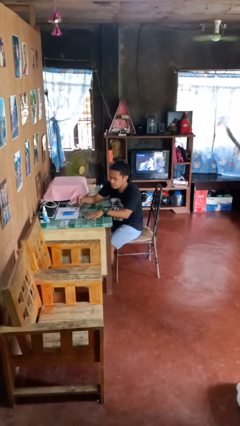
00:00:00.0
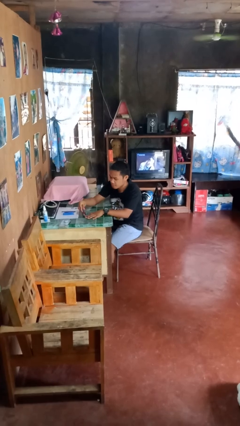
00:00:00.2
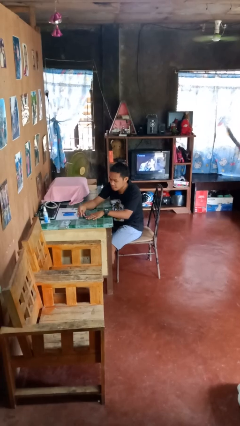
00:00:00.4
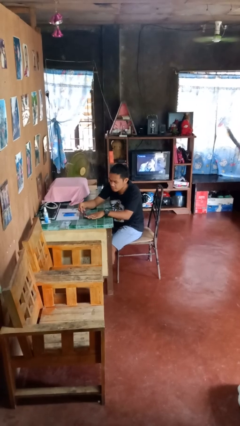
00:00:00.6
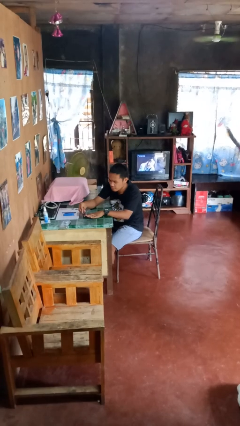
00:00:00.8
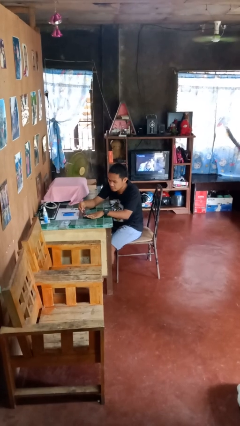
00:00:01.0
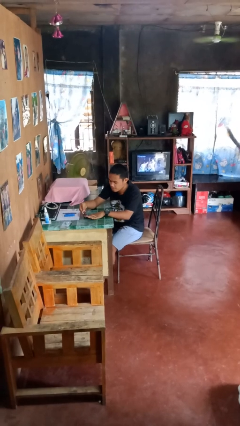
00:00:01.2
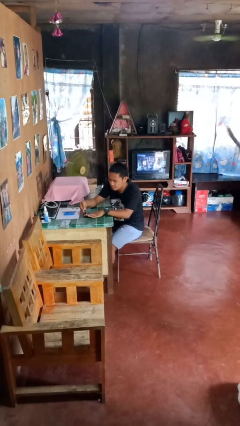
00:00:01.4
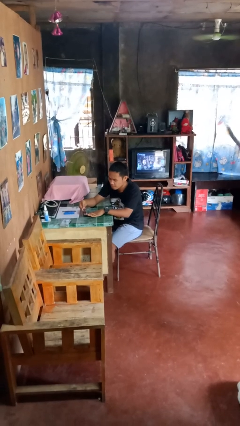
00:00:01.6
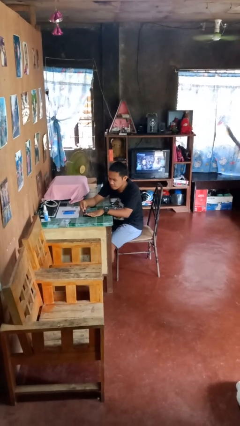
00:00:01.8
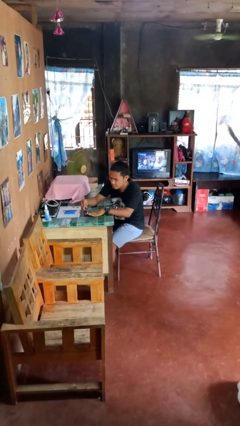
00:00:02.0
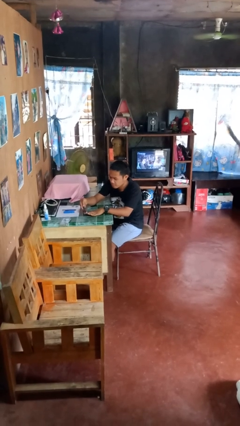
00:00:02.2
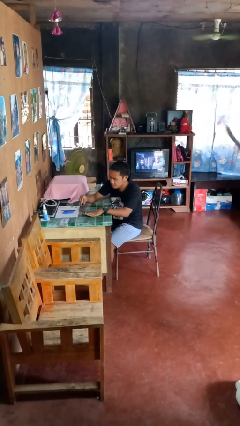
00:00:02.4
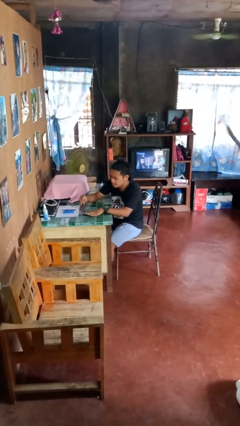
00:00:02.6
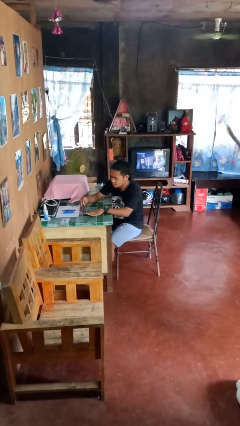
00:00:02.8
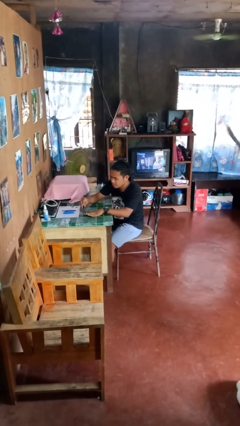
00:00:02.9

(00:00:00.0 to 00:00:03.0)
person paints fingernails

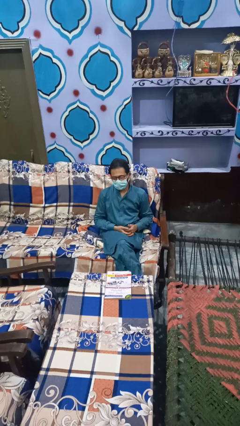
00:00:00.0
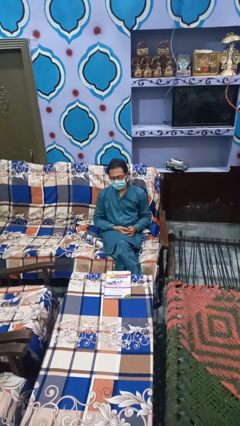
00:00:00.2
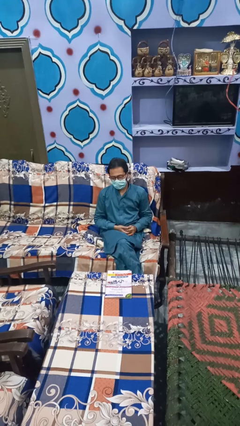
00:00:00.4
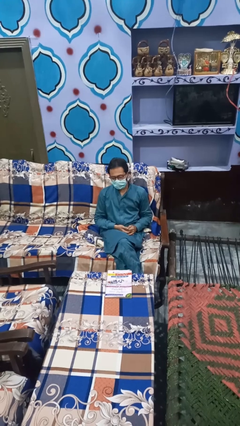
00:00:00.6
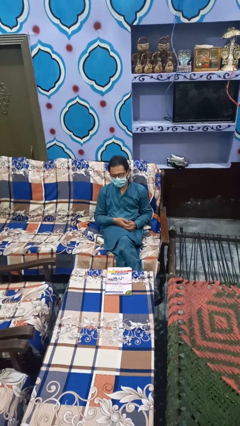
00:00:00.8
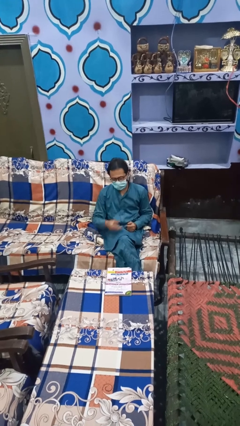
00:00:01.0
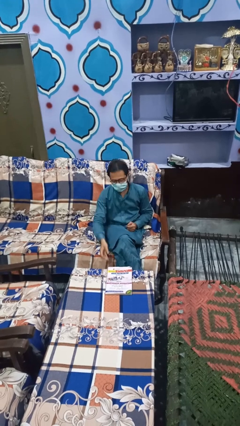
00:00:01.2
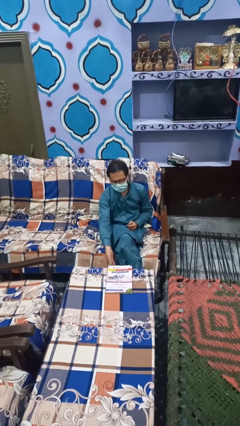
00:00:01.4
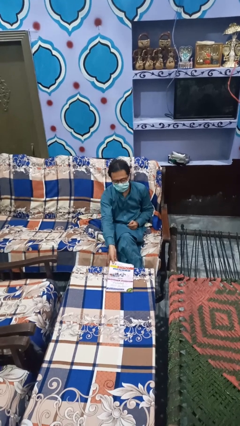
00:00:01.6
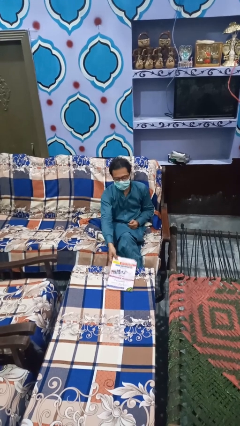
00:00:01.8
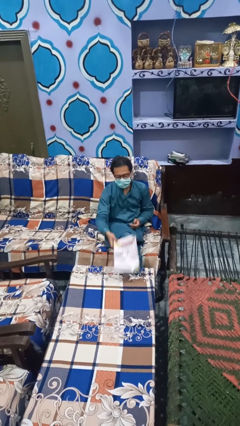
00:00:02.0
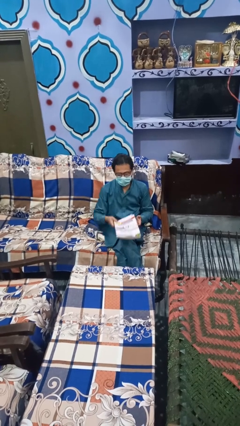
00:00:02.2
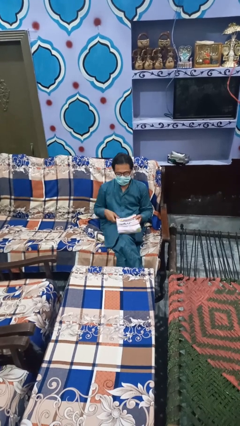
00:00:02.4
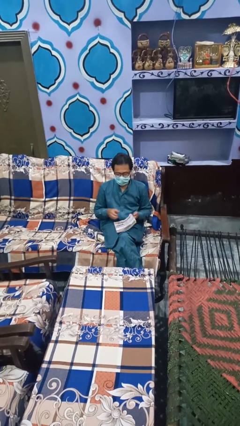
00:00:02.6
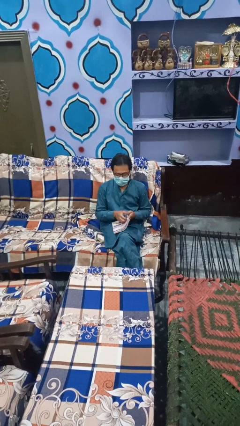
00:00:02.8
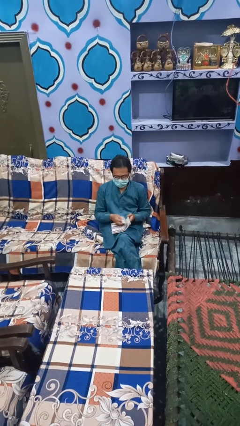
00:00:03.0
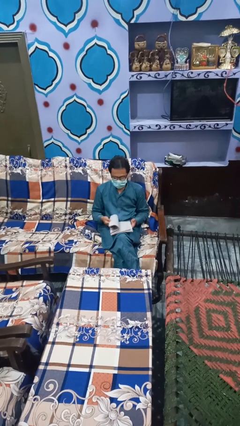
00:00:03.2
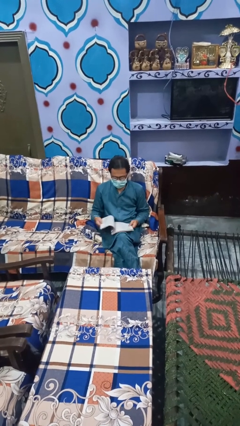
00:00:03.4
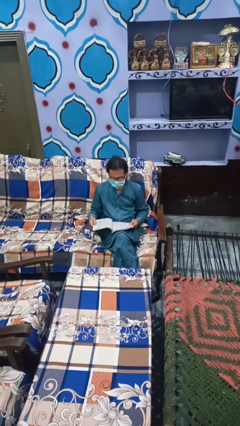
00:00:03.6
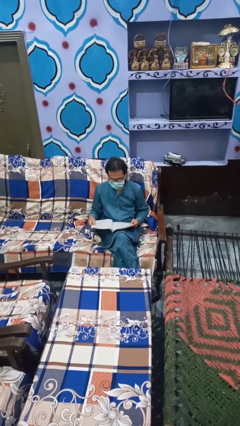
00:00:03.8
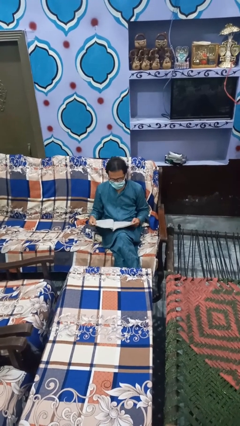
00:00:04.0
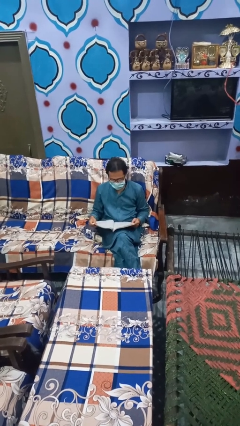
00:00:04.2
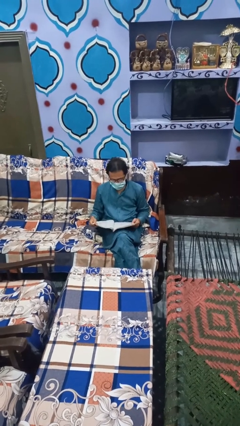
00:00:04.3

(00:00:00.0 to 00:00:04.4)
person reads book

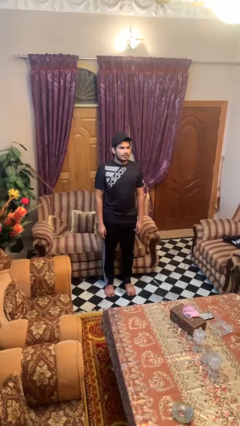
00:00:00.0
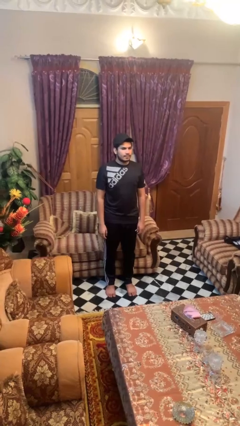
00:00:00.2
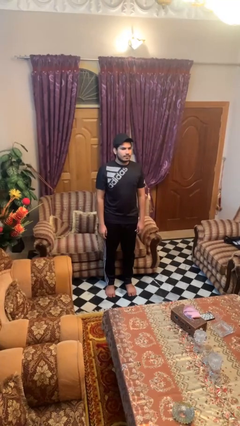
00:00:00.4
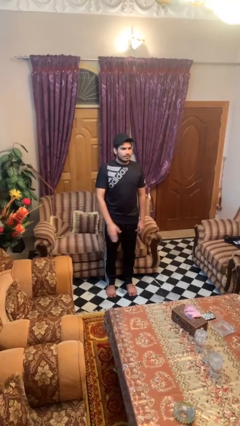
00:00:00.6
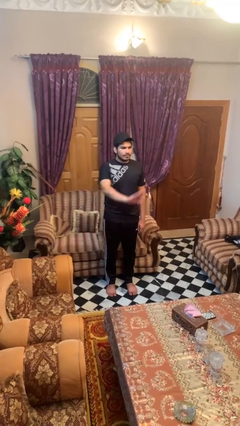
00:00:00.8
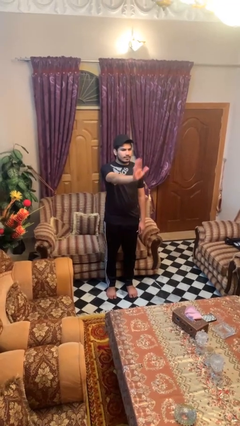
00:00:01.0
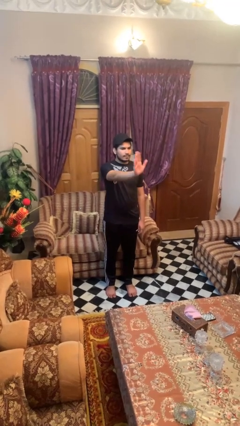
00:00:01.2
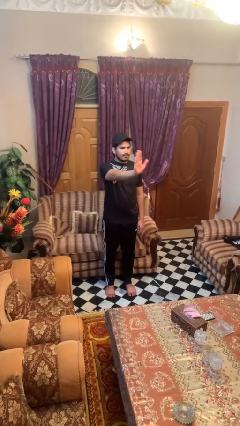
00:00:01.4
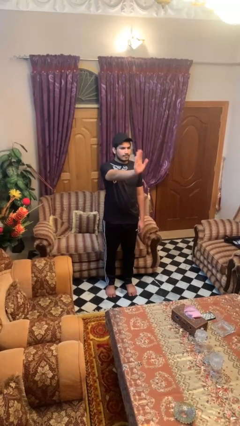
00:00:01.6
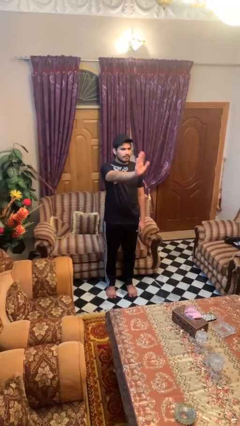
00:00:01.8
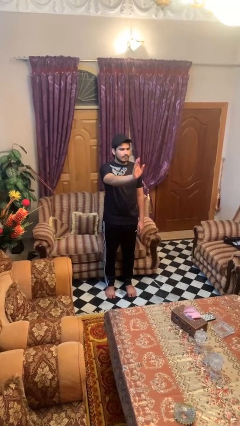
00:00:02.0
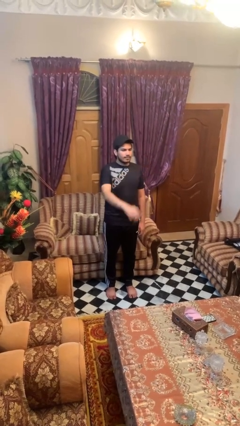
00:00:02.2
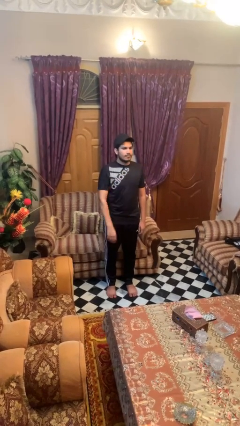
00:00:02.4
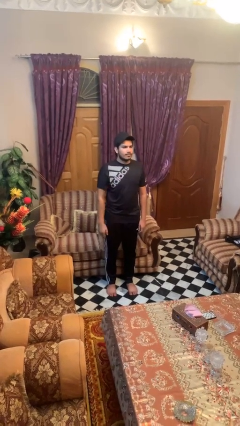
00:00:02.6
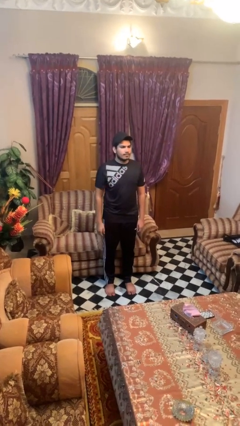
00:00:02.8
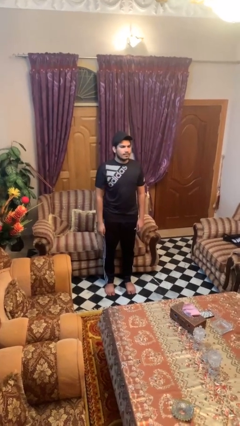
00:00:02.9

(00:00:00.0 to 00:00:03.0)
person waves at person

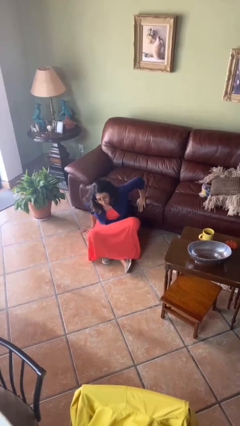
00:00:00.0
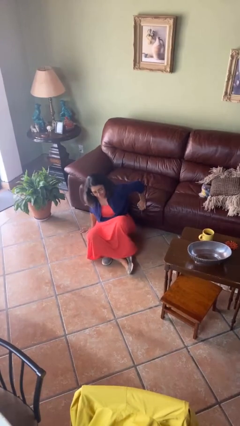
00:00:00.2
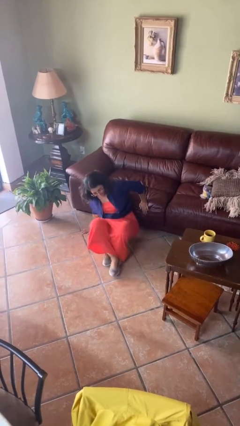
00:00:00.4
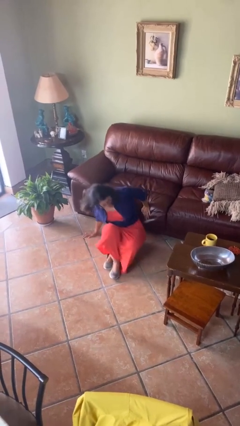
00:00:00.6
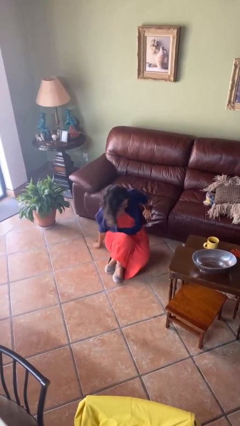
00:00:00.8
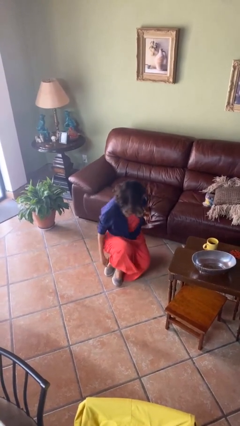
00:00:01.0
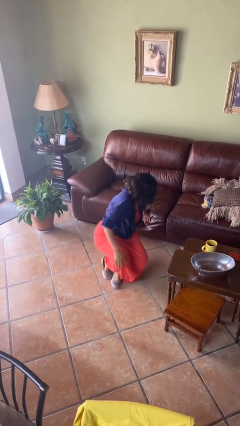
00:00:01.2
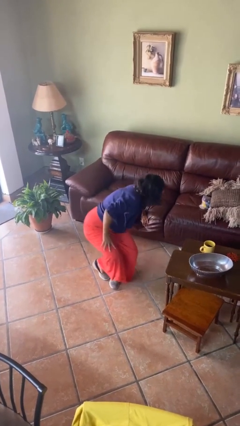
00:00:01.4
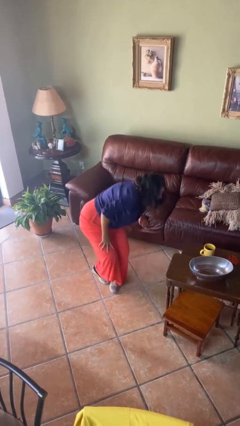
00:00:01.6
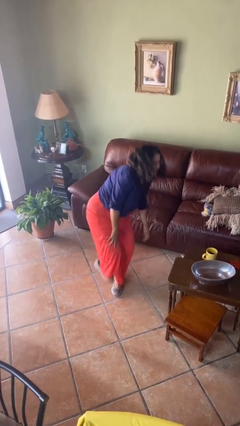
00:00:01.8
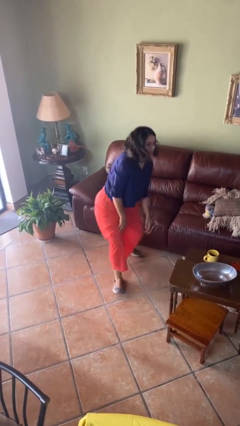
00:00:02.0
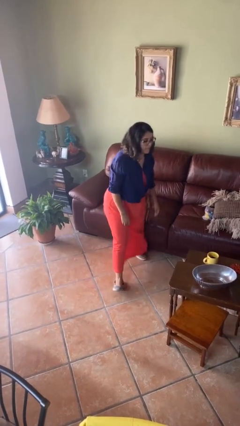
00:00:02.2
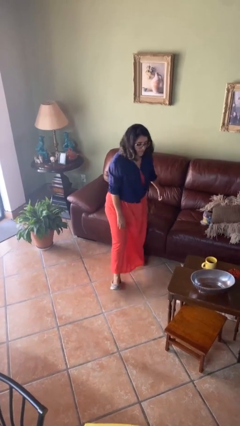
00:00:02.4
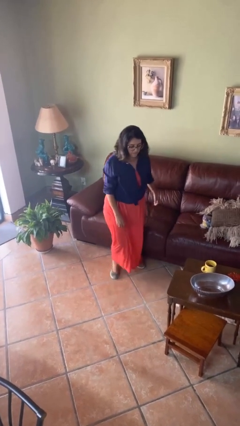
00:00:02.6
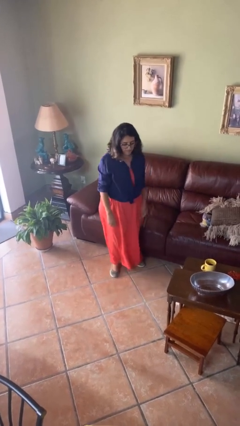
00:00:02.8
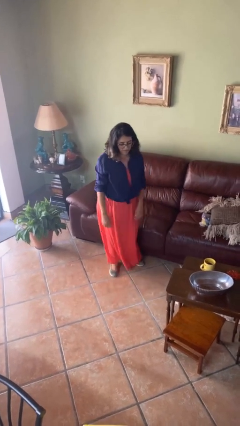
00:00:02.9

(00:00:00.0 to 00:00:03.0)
person stands up from floor

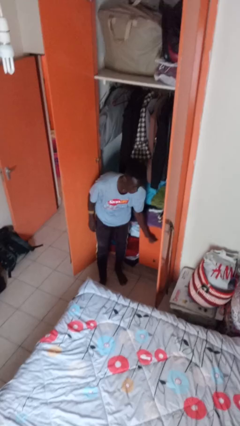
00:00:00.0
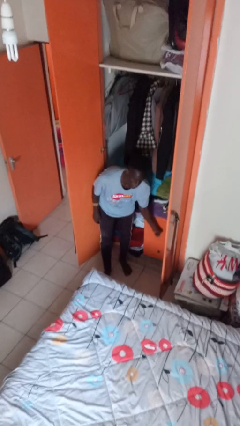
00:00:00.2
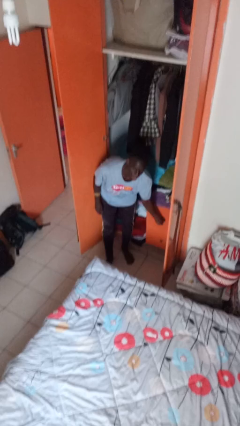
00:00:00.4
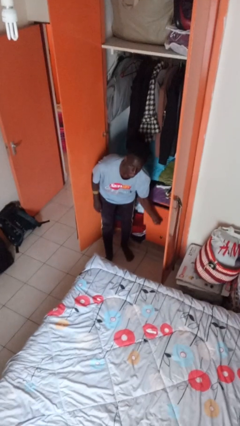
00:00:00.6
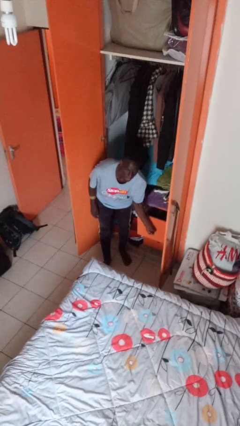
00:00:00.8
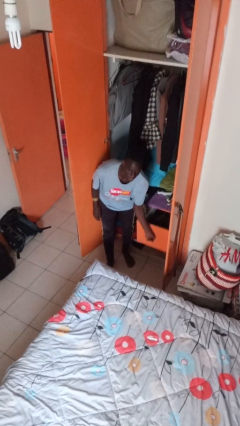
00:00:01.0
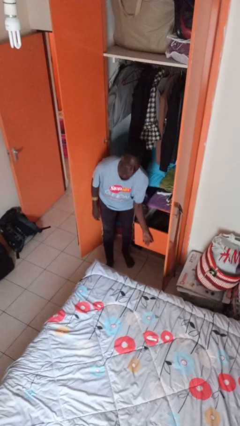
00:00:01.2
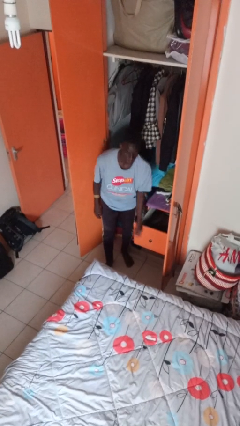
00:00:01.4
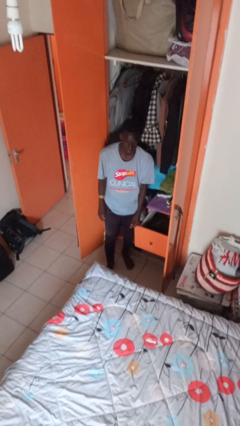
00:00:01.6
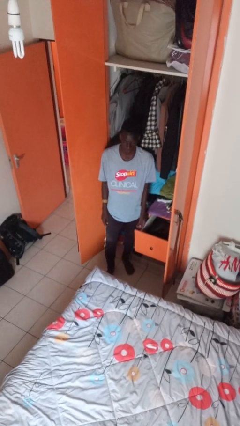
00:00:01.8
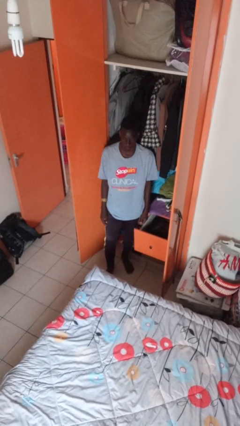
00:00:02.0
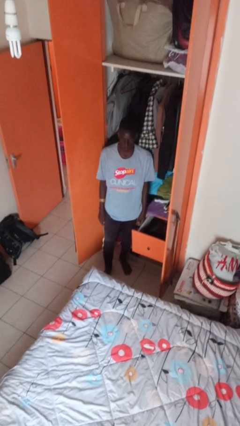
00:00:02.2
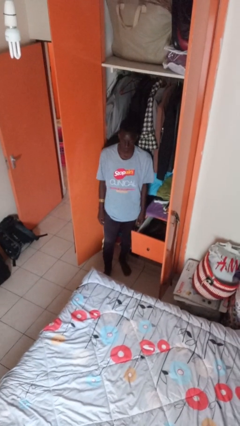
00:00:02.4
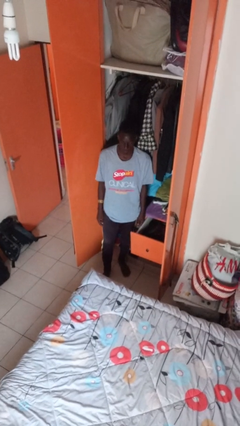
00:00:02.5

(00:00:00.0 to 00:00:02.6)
person opens dresser drawer

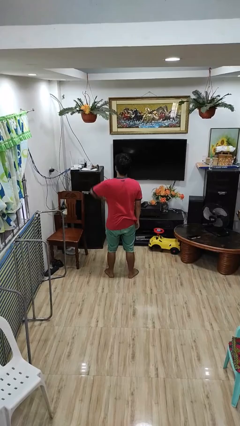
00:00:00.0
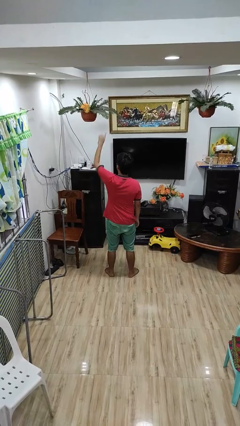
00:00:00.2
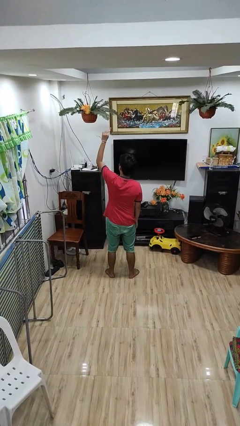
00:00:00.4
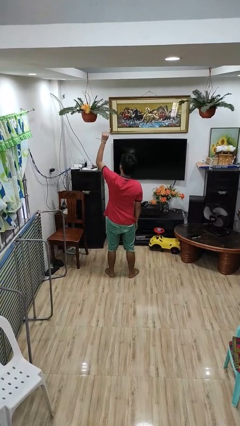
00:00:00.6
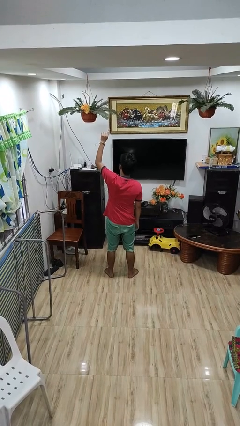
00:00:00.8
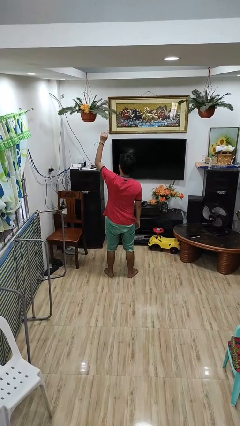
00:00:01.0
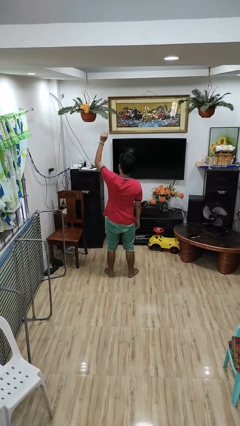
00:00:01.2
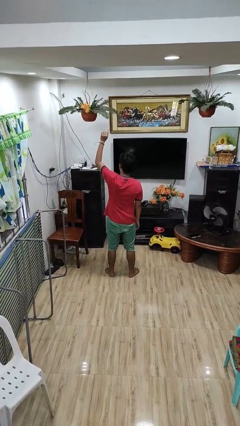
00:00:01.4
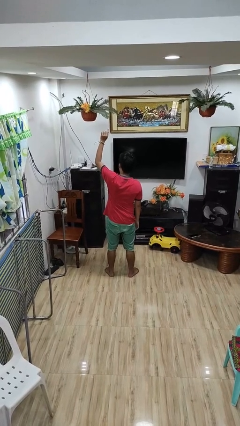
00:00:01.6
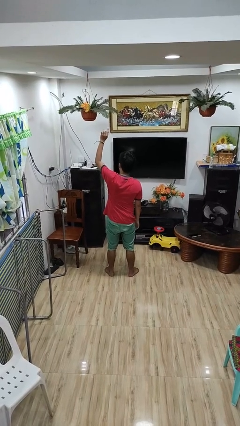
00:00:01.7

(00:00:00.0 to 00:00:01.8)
person gestures swipe up
